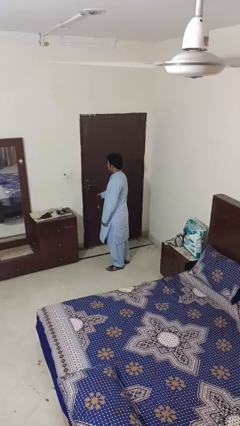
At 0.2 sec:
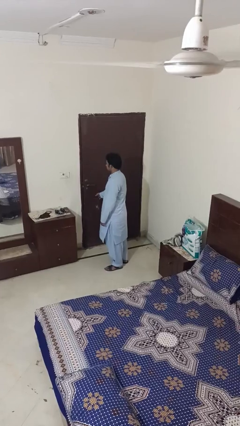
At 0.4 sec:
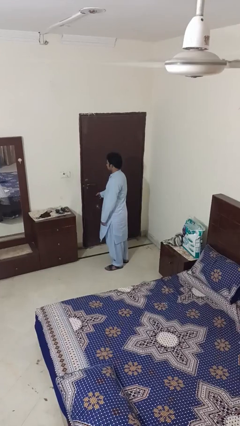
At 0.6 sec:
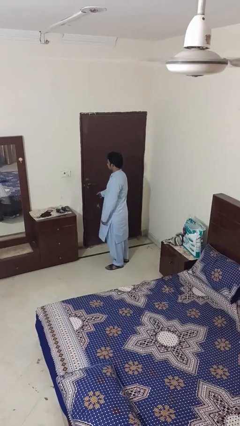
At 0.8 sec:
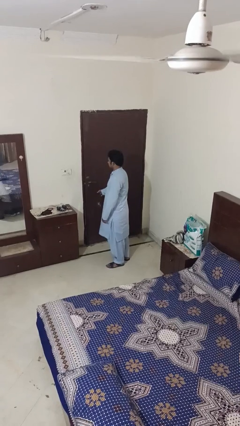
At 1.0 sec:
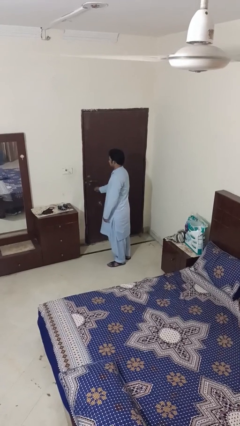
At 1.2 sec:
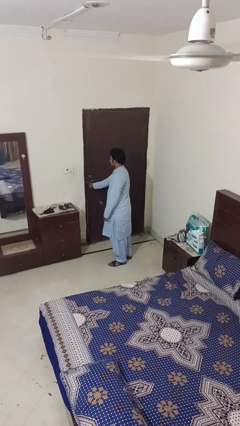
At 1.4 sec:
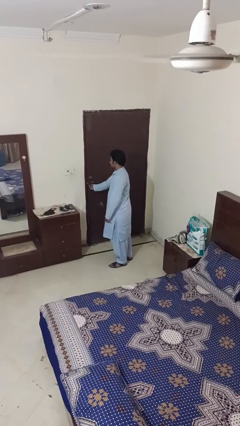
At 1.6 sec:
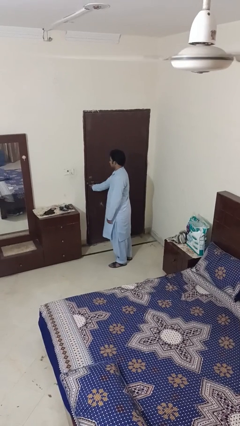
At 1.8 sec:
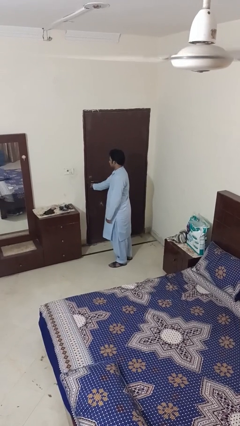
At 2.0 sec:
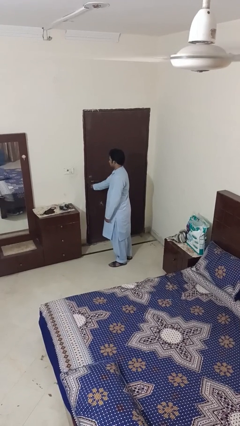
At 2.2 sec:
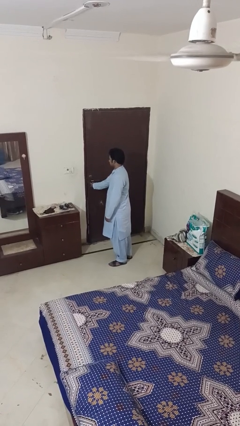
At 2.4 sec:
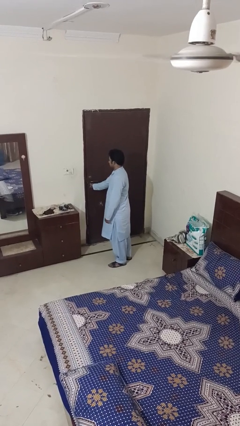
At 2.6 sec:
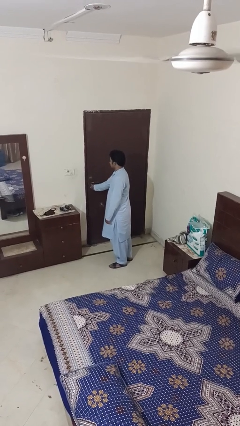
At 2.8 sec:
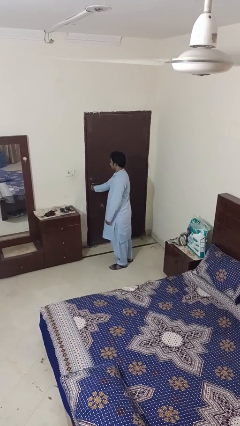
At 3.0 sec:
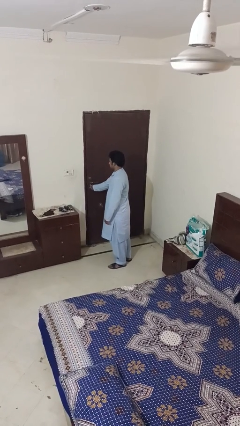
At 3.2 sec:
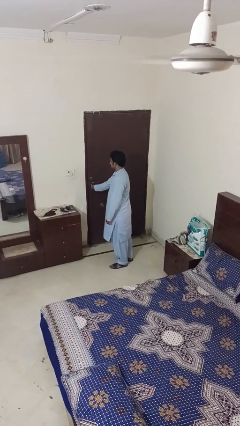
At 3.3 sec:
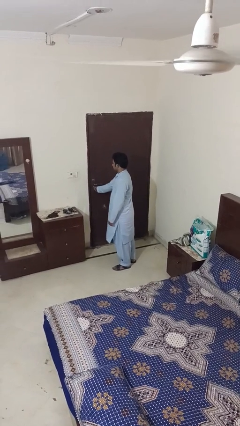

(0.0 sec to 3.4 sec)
person unlocks door with keys

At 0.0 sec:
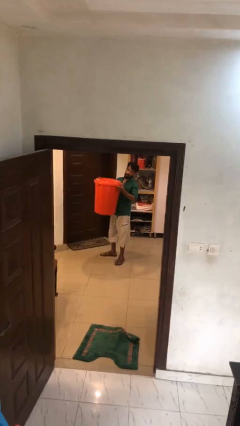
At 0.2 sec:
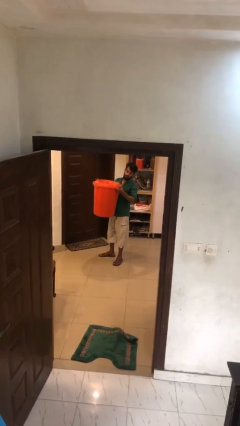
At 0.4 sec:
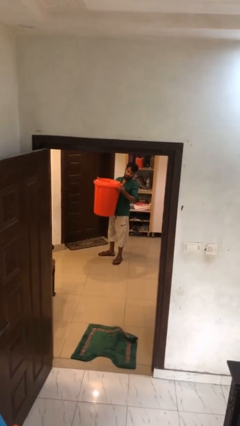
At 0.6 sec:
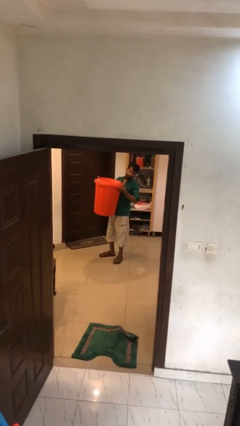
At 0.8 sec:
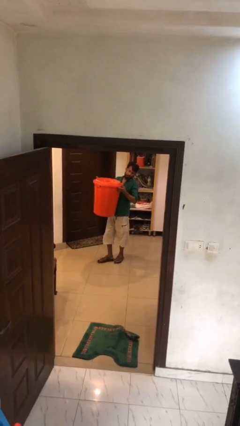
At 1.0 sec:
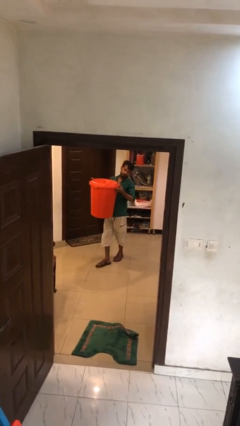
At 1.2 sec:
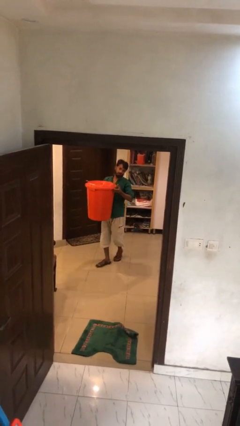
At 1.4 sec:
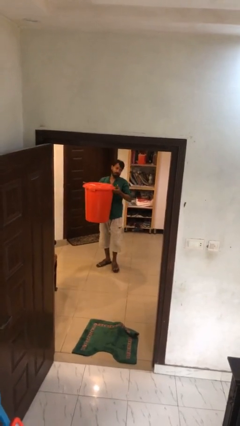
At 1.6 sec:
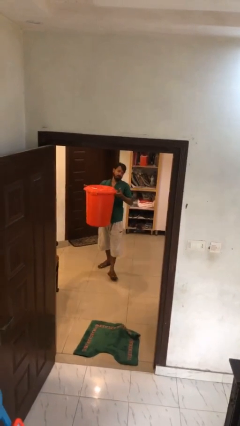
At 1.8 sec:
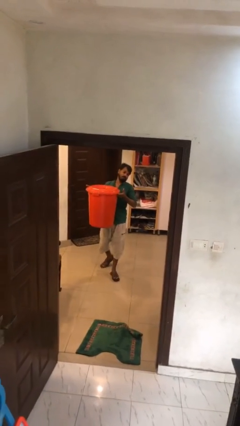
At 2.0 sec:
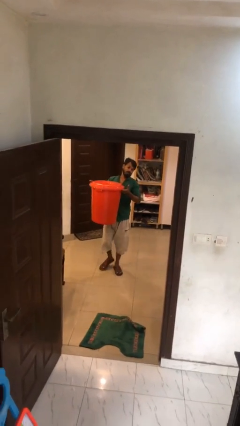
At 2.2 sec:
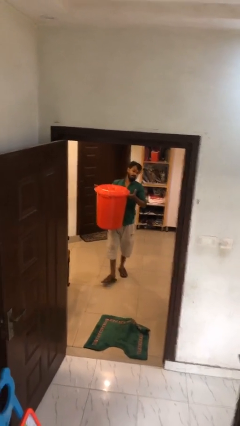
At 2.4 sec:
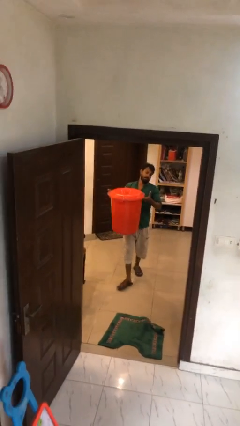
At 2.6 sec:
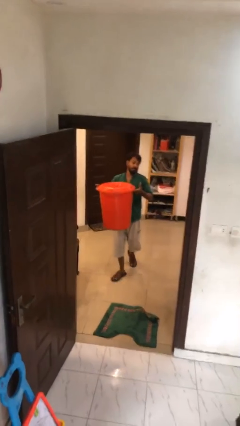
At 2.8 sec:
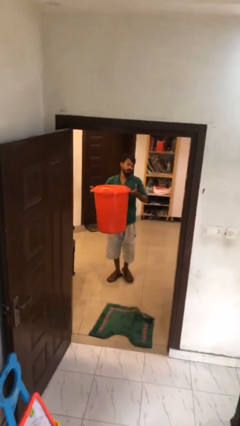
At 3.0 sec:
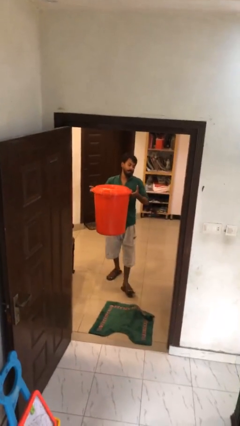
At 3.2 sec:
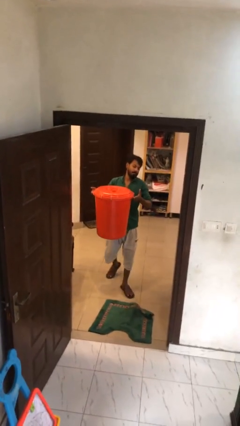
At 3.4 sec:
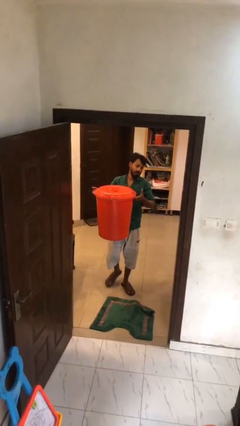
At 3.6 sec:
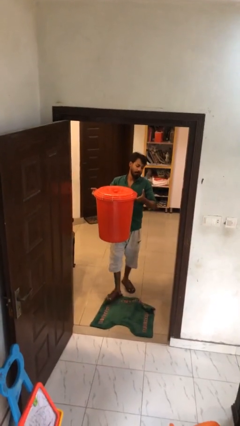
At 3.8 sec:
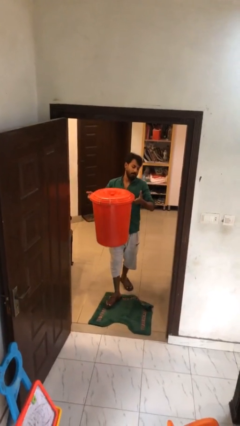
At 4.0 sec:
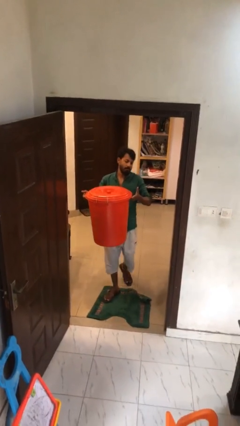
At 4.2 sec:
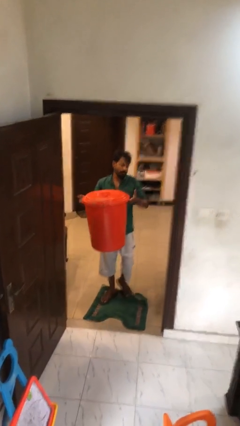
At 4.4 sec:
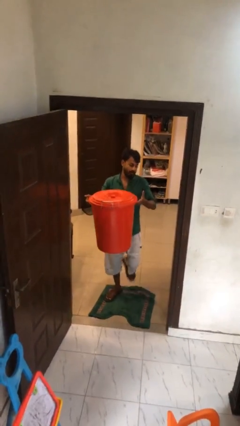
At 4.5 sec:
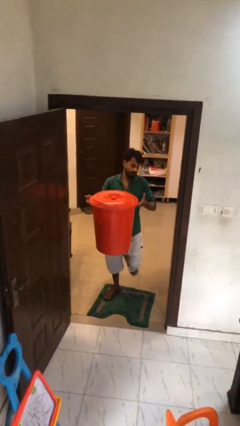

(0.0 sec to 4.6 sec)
person carries heavy object

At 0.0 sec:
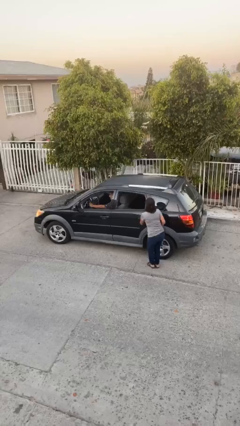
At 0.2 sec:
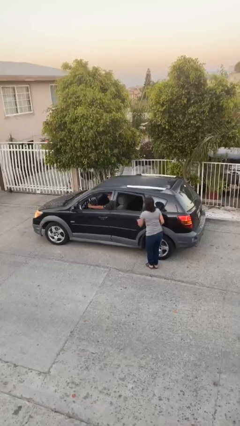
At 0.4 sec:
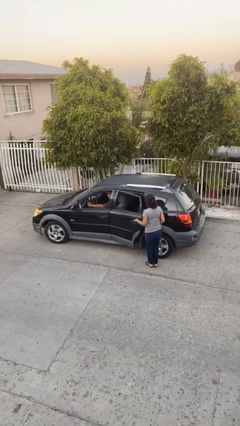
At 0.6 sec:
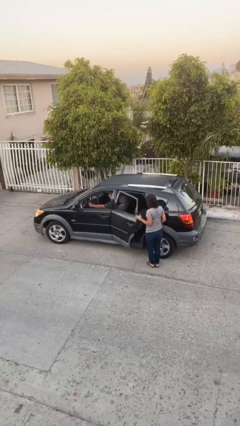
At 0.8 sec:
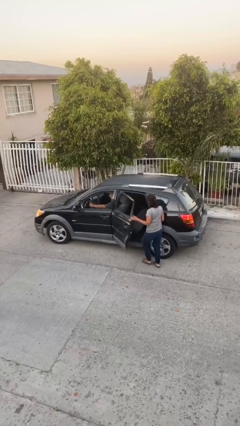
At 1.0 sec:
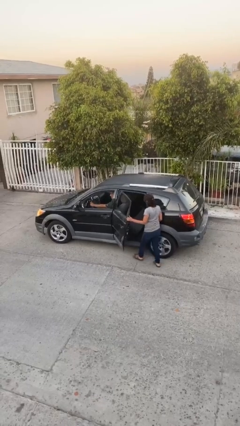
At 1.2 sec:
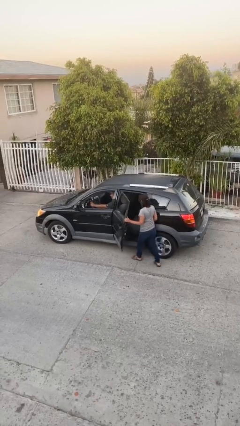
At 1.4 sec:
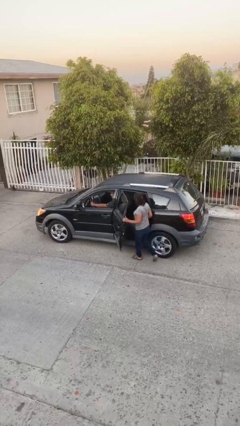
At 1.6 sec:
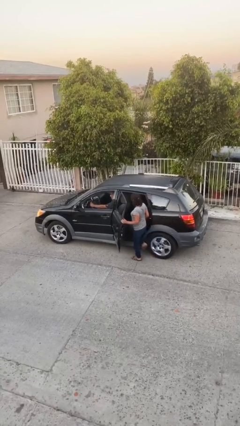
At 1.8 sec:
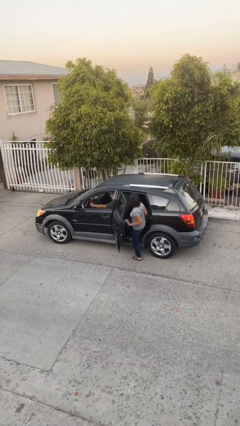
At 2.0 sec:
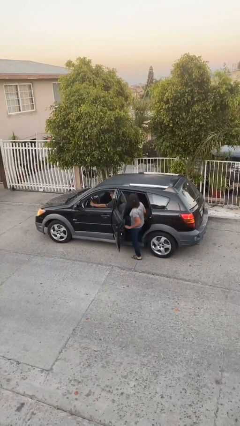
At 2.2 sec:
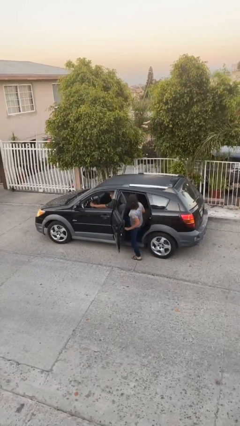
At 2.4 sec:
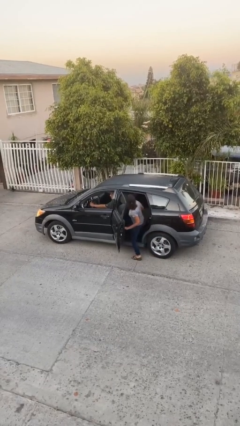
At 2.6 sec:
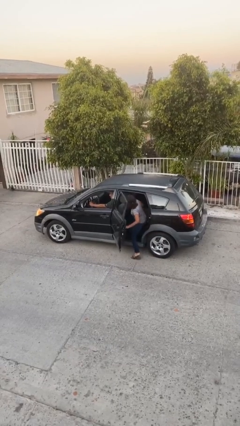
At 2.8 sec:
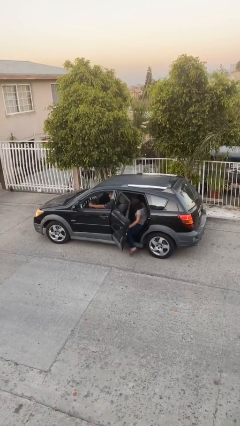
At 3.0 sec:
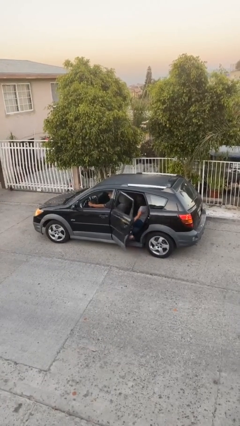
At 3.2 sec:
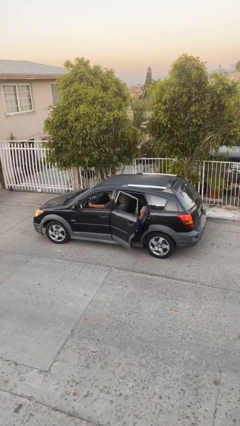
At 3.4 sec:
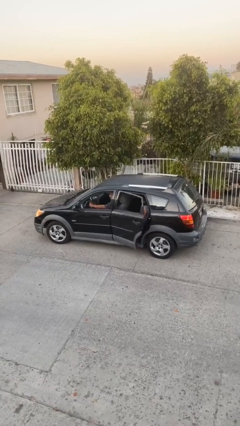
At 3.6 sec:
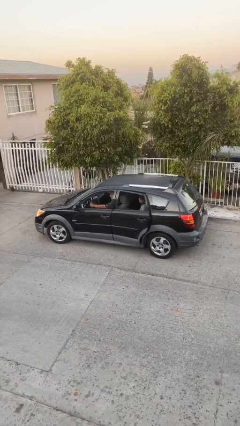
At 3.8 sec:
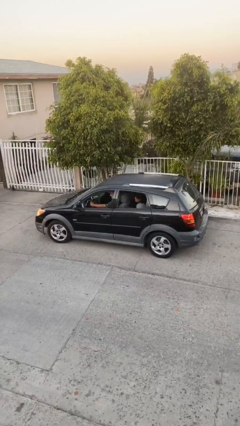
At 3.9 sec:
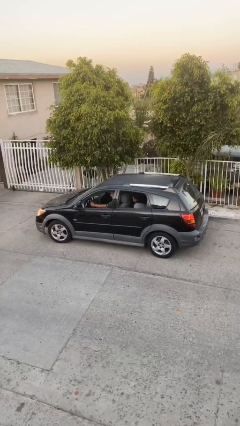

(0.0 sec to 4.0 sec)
car picks up person

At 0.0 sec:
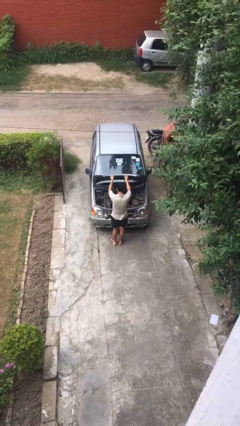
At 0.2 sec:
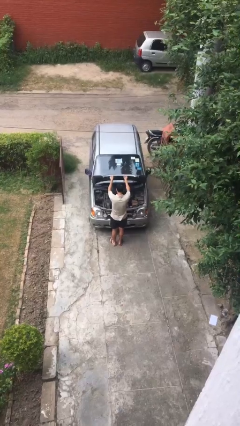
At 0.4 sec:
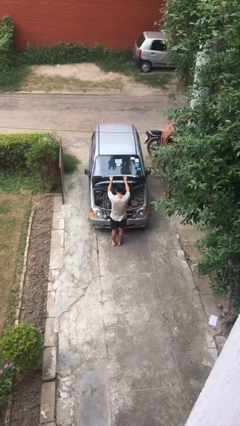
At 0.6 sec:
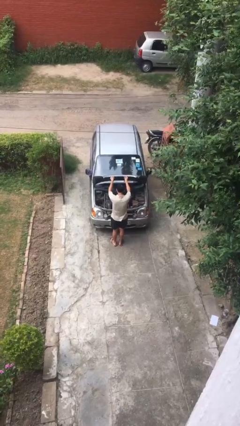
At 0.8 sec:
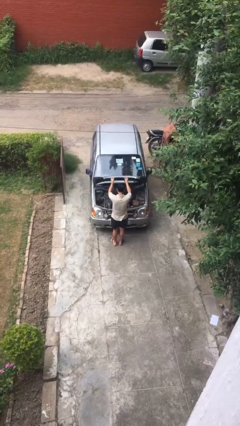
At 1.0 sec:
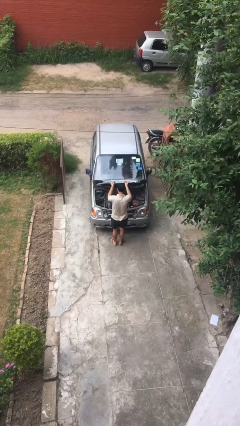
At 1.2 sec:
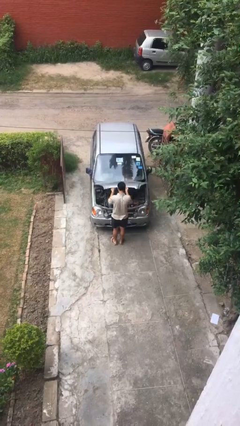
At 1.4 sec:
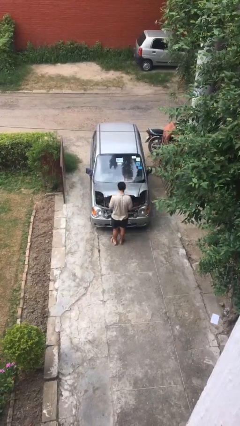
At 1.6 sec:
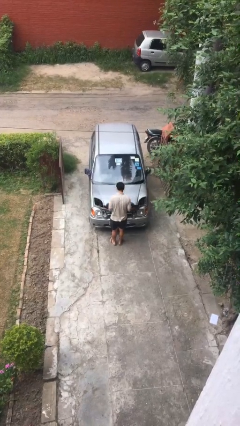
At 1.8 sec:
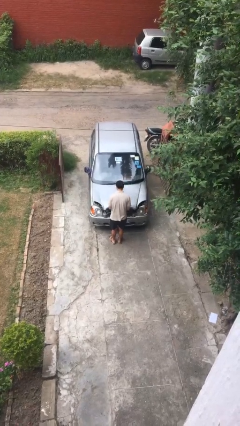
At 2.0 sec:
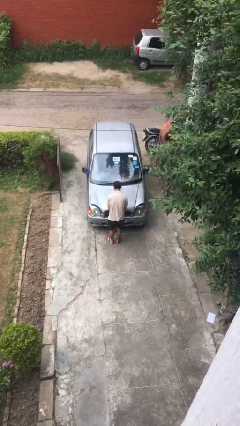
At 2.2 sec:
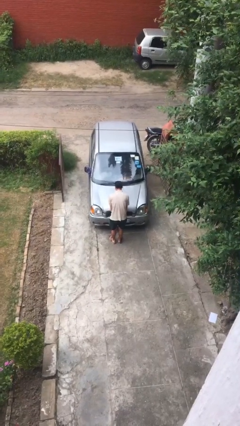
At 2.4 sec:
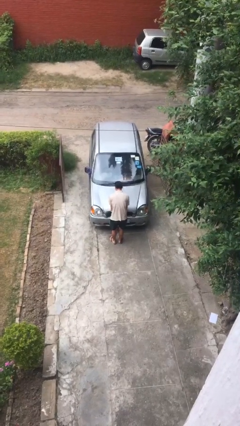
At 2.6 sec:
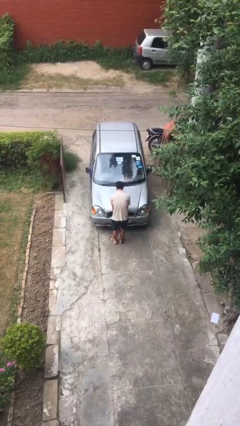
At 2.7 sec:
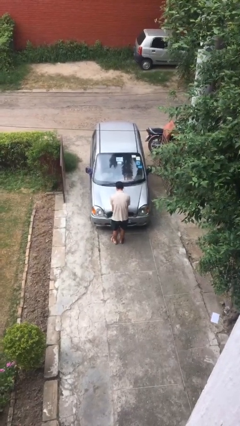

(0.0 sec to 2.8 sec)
person closes car hood

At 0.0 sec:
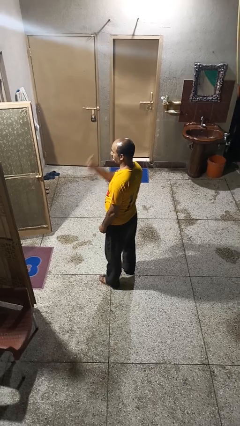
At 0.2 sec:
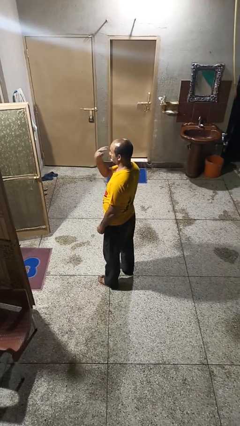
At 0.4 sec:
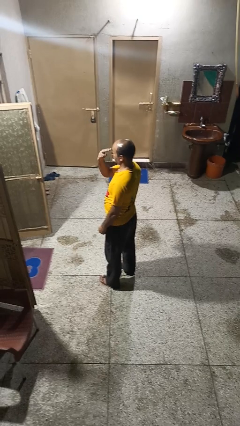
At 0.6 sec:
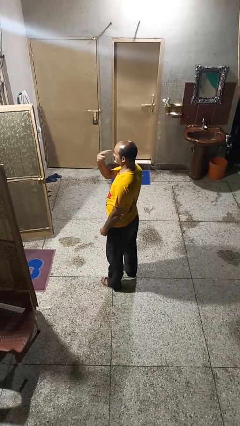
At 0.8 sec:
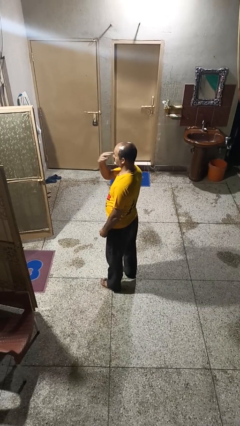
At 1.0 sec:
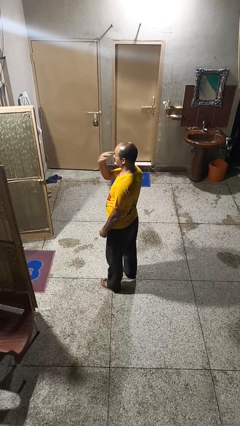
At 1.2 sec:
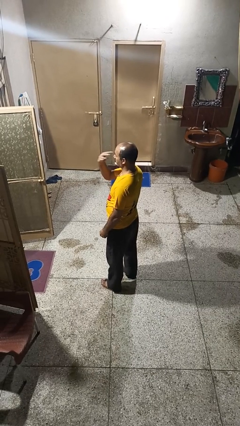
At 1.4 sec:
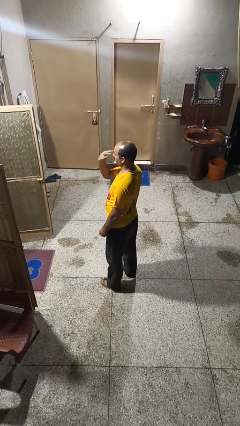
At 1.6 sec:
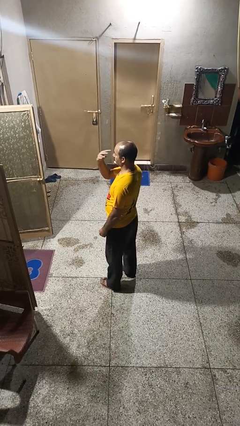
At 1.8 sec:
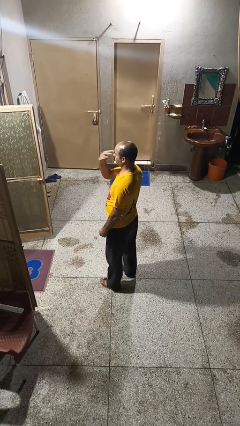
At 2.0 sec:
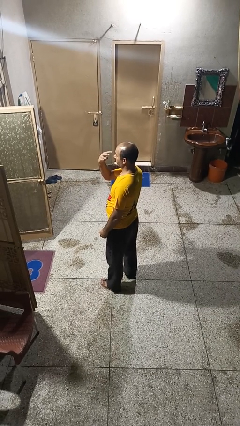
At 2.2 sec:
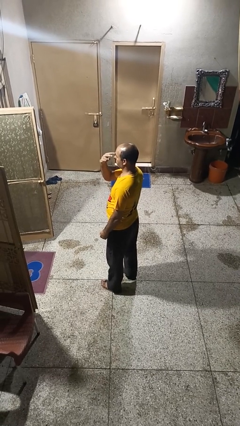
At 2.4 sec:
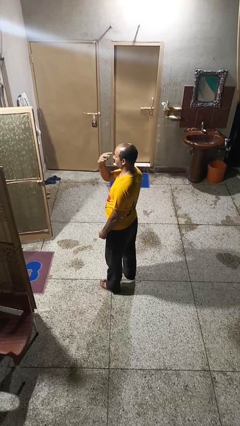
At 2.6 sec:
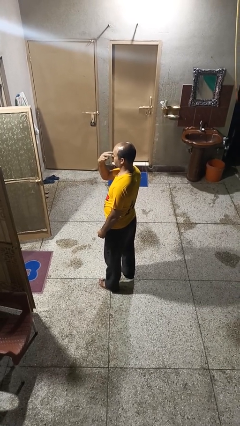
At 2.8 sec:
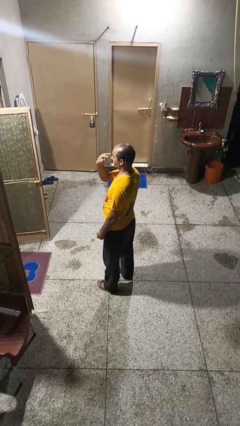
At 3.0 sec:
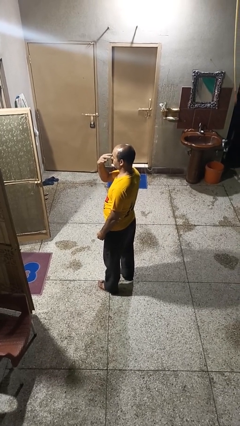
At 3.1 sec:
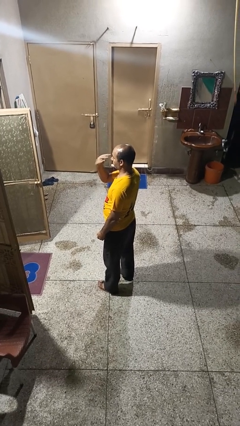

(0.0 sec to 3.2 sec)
person gestures watch closely
